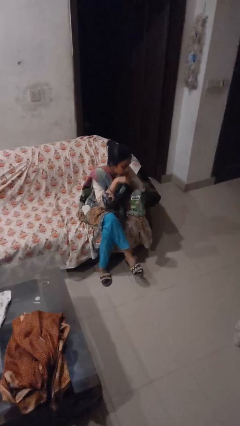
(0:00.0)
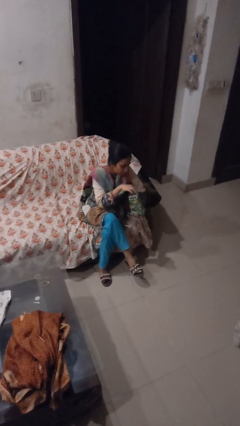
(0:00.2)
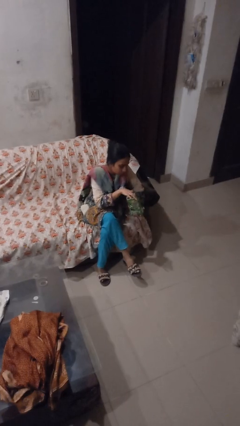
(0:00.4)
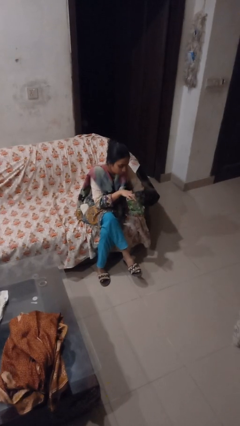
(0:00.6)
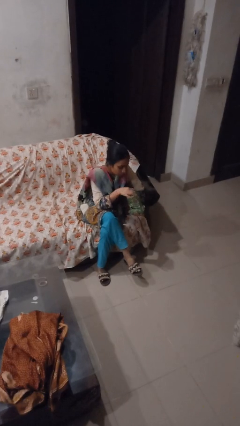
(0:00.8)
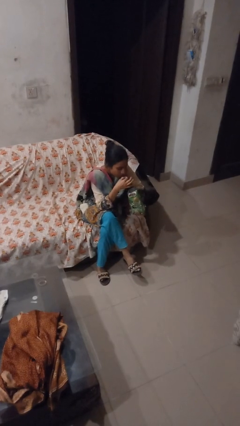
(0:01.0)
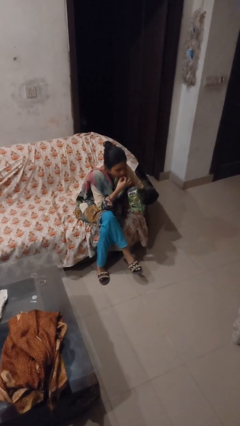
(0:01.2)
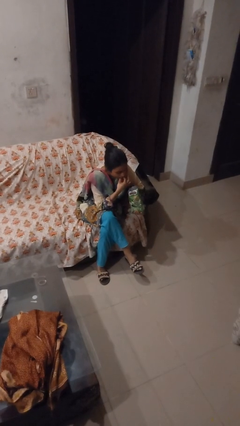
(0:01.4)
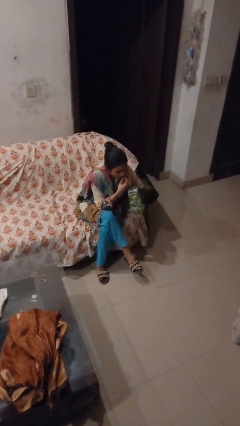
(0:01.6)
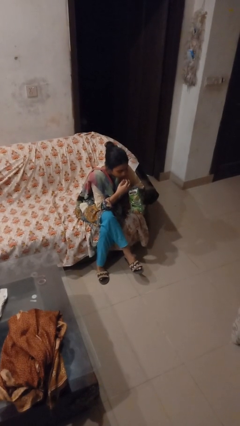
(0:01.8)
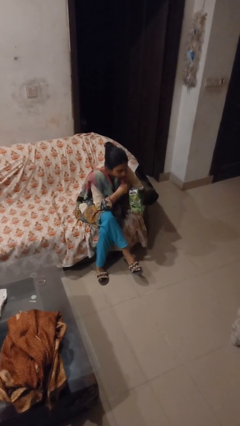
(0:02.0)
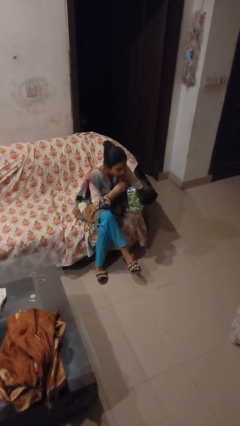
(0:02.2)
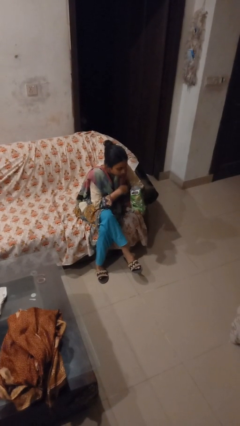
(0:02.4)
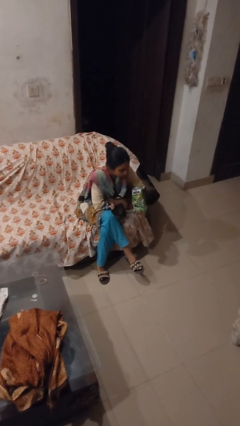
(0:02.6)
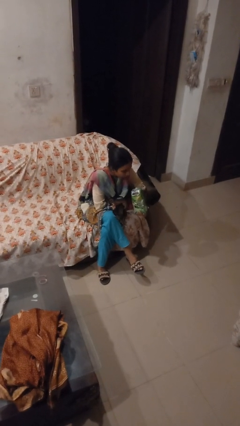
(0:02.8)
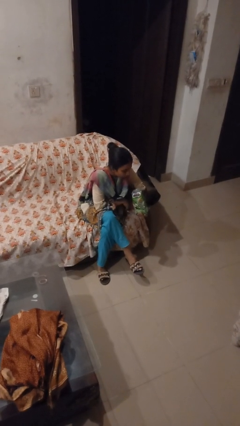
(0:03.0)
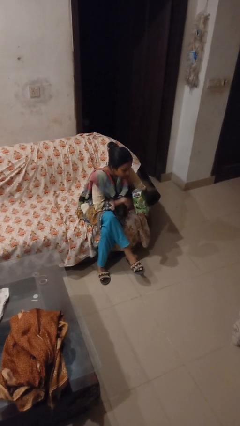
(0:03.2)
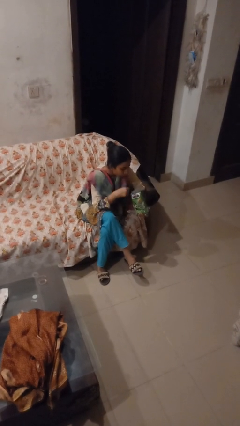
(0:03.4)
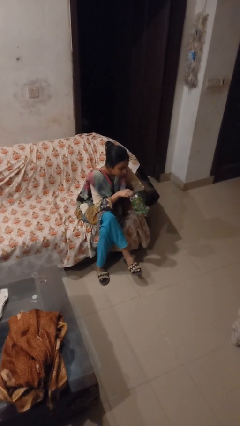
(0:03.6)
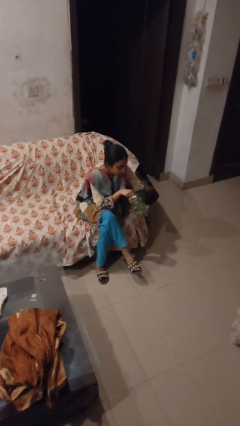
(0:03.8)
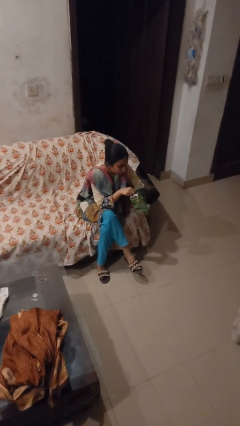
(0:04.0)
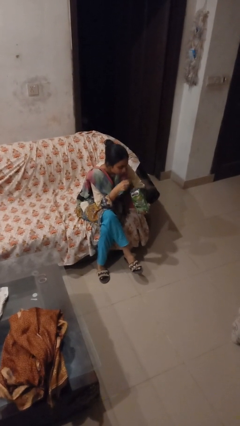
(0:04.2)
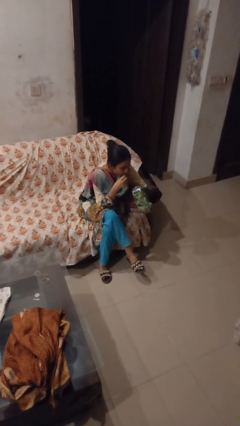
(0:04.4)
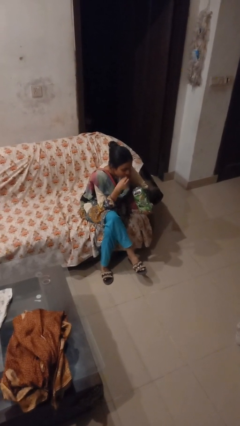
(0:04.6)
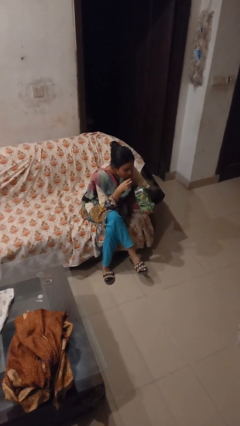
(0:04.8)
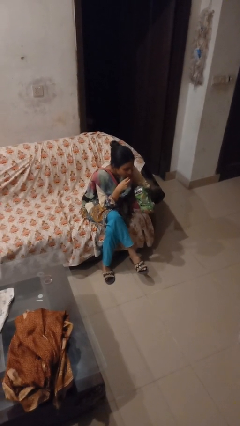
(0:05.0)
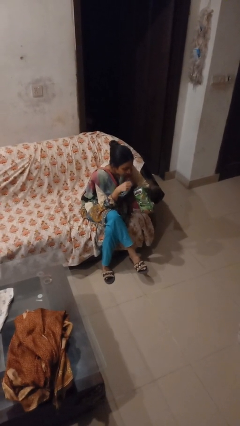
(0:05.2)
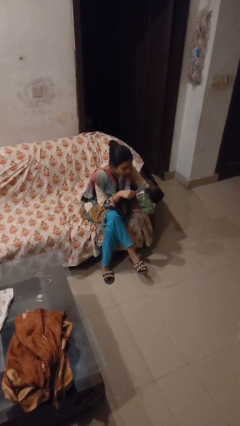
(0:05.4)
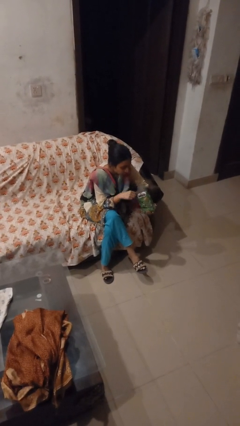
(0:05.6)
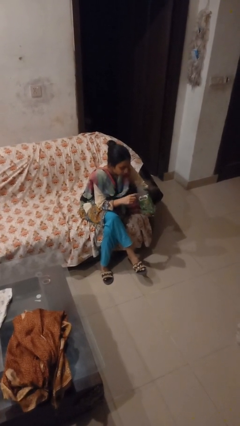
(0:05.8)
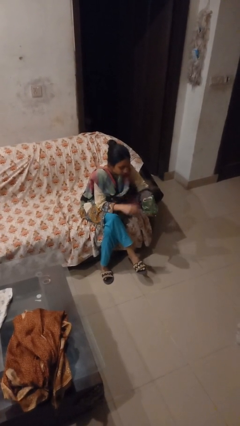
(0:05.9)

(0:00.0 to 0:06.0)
person eats snack from bag

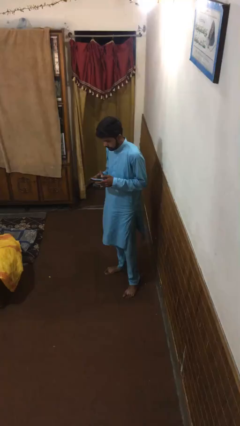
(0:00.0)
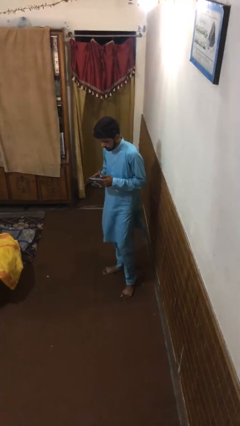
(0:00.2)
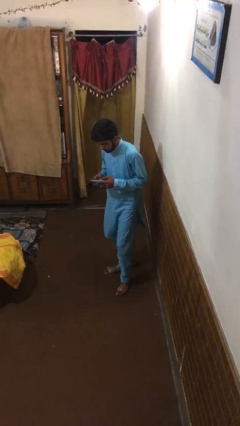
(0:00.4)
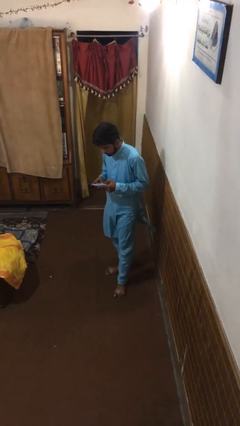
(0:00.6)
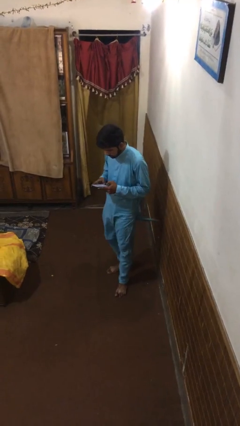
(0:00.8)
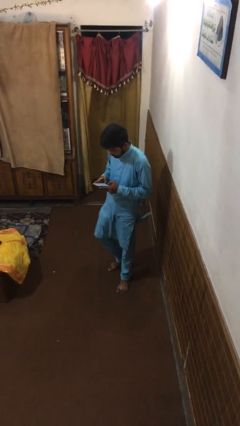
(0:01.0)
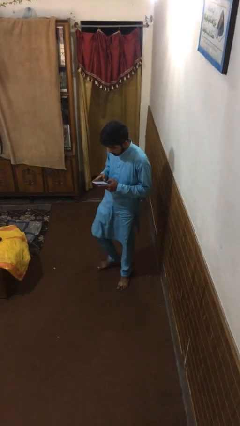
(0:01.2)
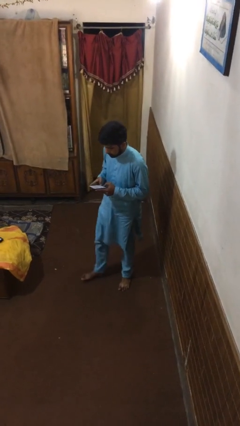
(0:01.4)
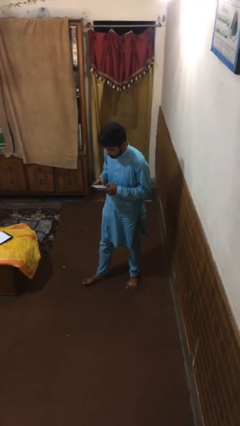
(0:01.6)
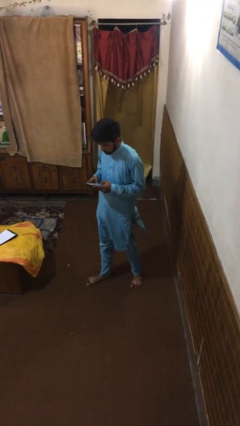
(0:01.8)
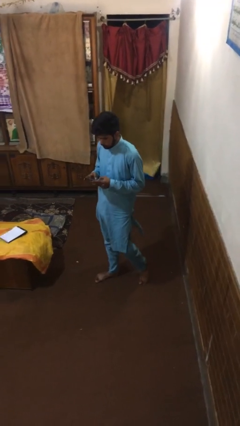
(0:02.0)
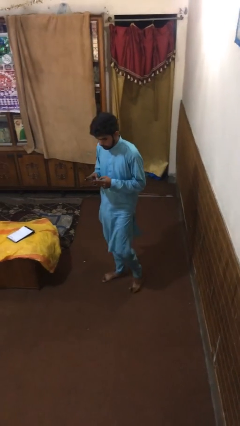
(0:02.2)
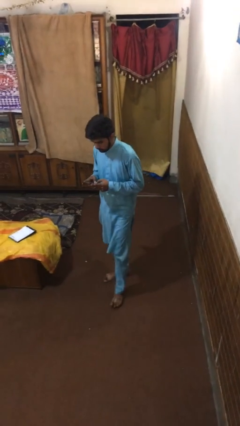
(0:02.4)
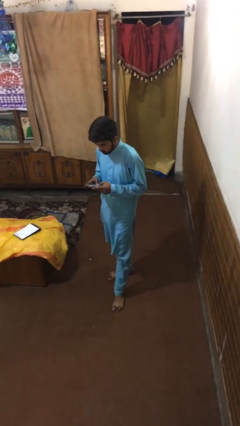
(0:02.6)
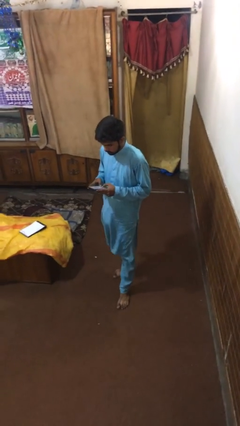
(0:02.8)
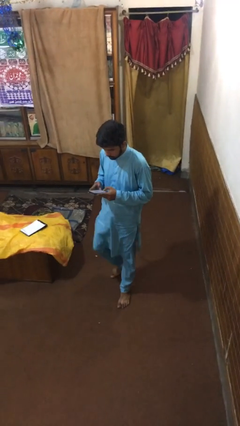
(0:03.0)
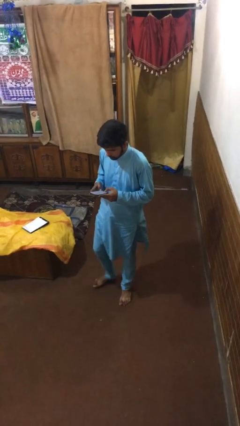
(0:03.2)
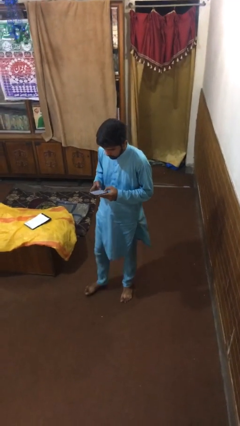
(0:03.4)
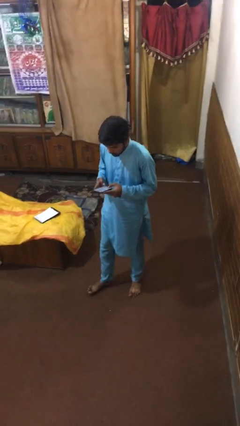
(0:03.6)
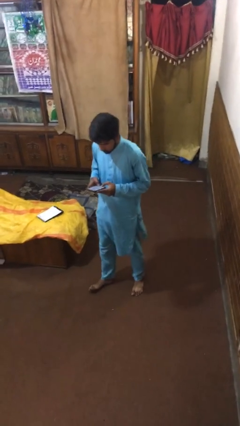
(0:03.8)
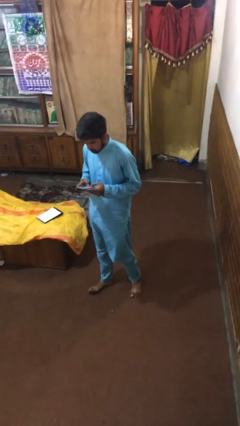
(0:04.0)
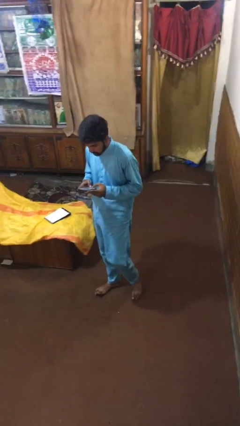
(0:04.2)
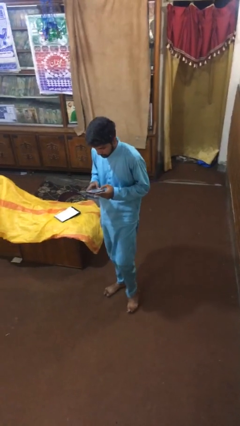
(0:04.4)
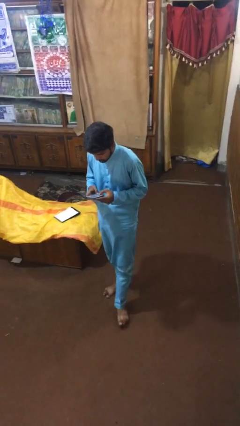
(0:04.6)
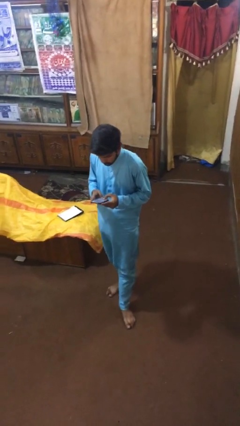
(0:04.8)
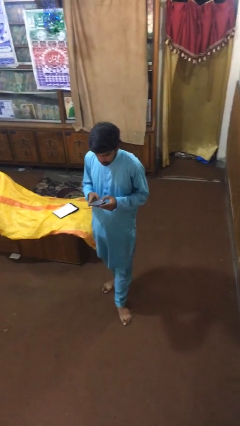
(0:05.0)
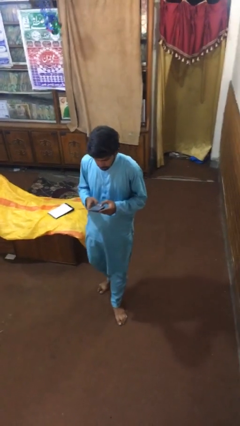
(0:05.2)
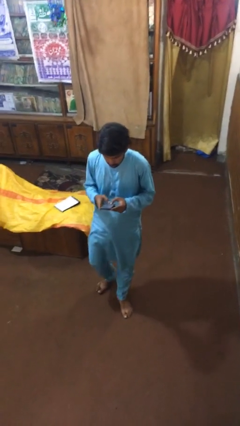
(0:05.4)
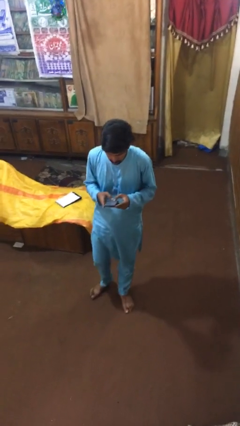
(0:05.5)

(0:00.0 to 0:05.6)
person texts on phone

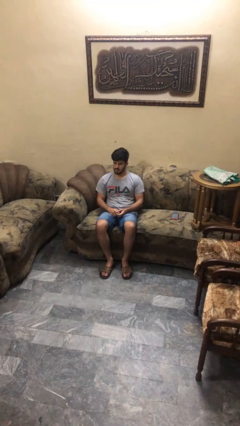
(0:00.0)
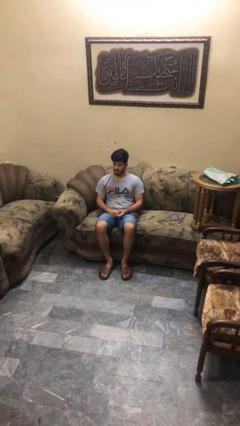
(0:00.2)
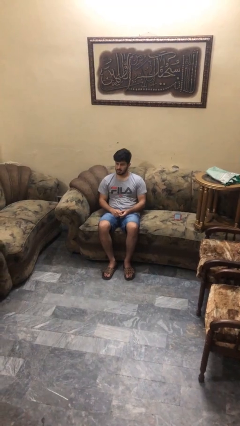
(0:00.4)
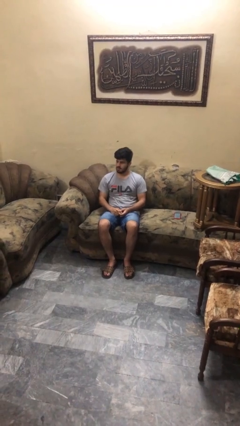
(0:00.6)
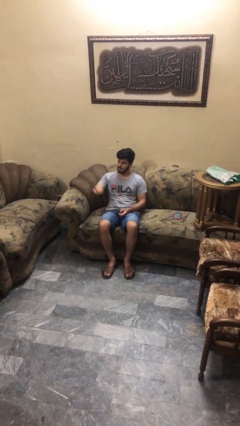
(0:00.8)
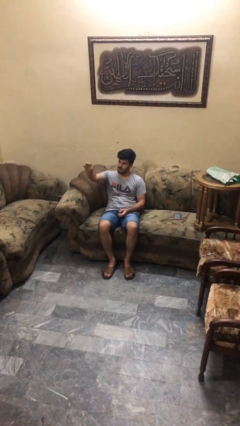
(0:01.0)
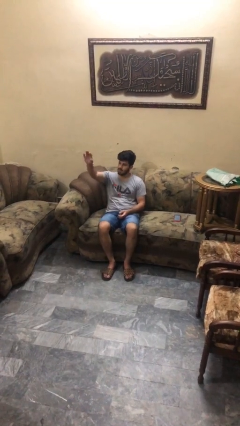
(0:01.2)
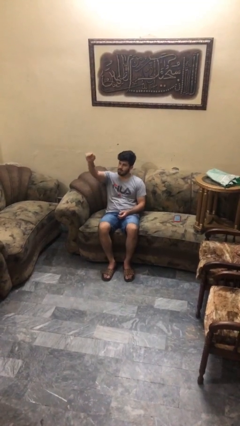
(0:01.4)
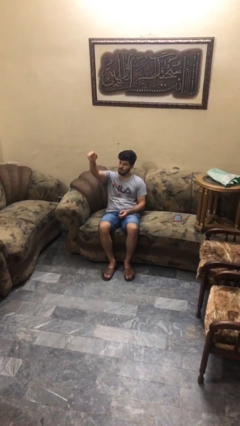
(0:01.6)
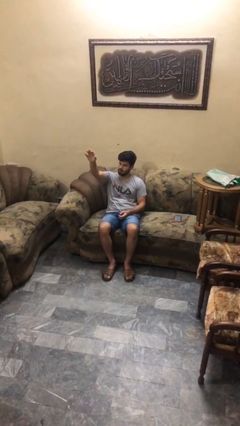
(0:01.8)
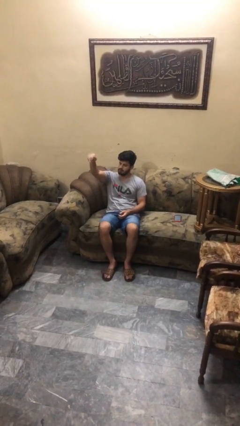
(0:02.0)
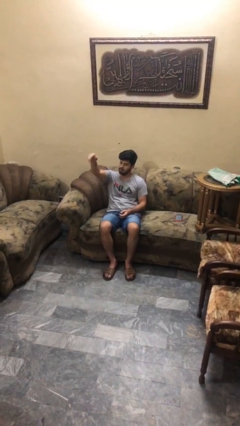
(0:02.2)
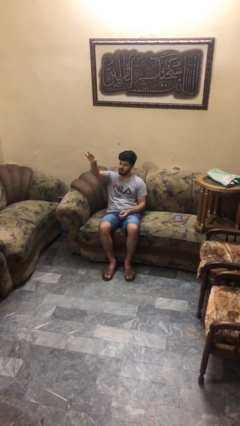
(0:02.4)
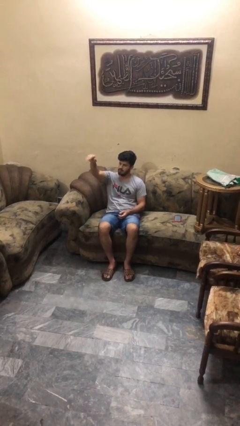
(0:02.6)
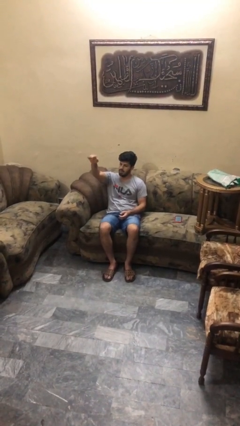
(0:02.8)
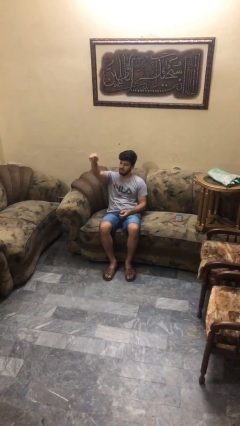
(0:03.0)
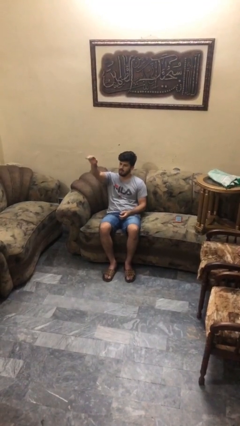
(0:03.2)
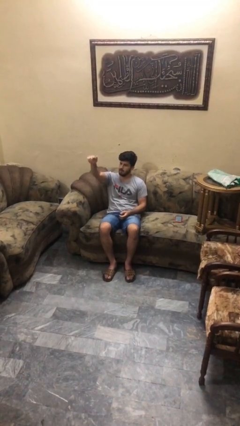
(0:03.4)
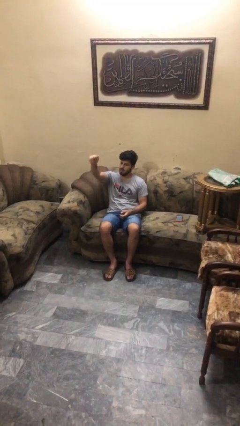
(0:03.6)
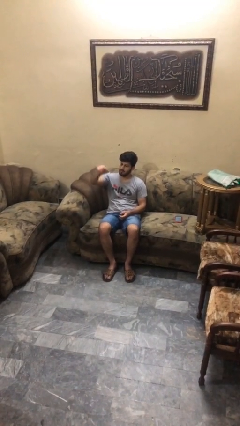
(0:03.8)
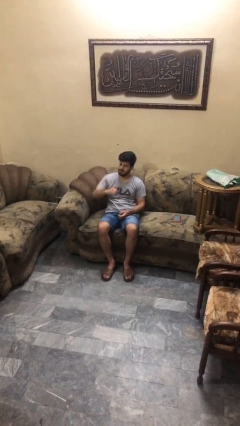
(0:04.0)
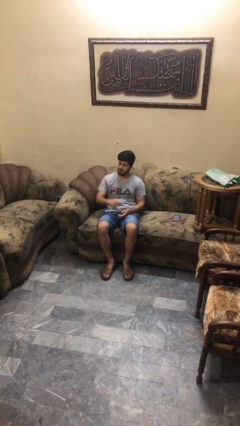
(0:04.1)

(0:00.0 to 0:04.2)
person gestures come here

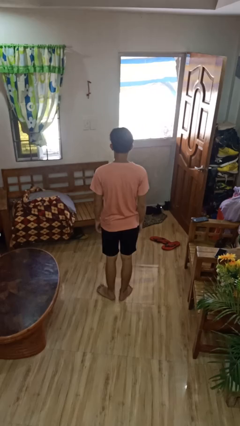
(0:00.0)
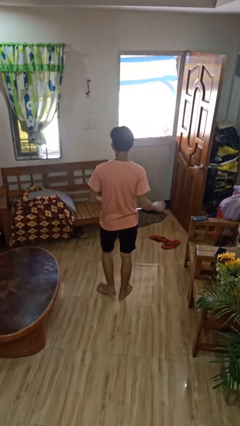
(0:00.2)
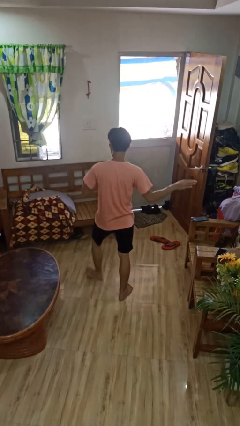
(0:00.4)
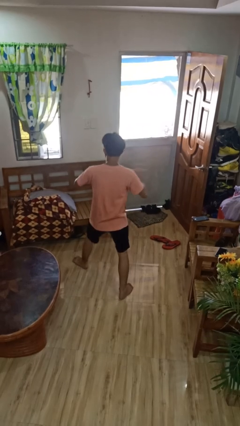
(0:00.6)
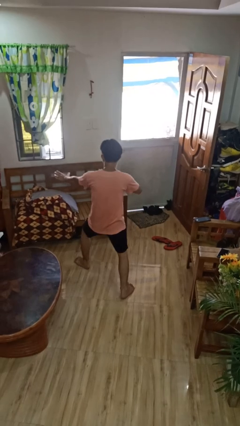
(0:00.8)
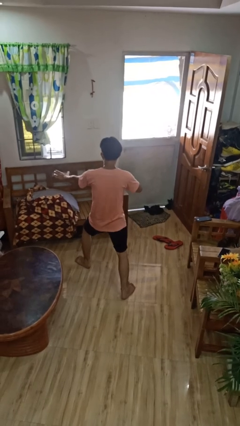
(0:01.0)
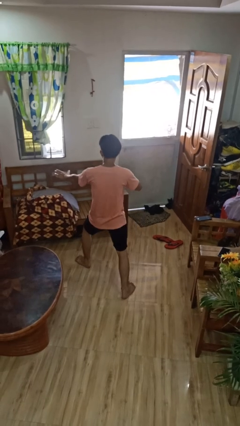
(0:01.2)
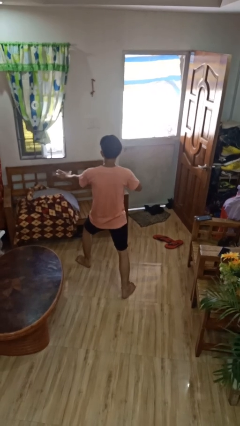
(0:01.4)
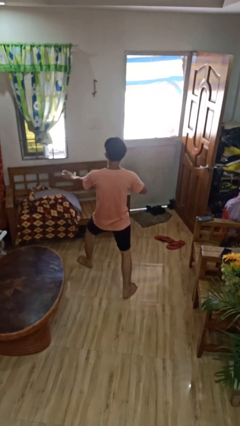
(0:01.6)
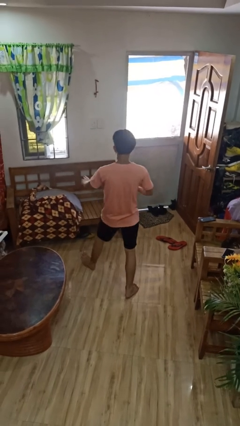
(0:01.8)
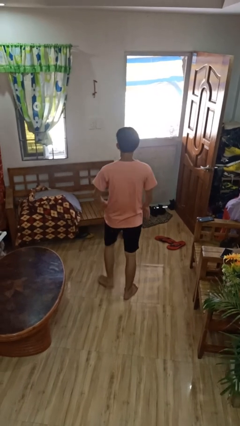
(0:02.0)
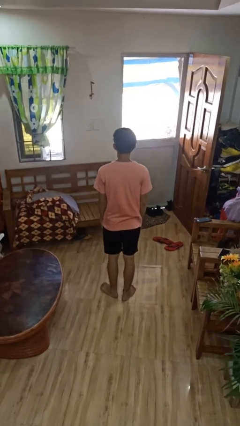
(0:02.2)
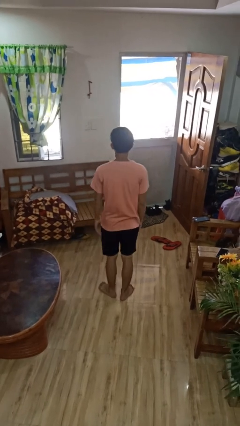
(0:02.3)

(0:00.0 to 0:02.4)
person karate chop
